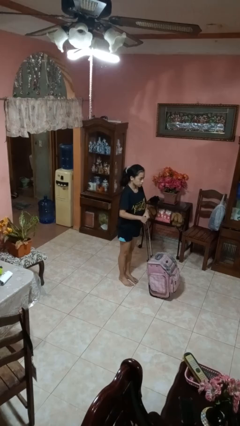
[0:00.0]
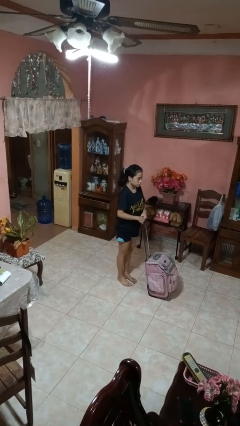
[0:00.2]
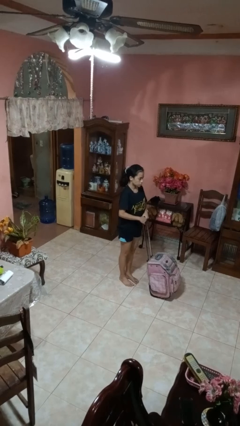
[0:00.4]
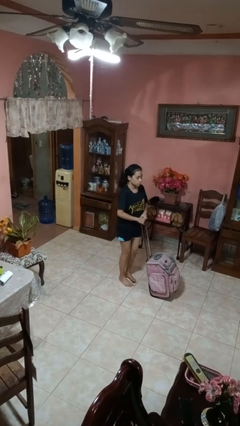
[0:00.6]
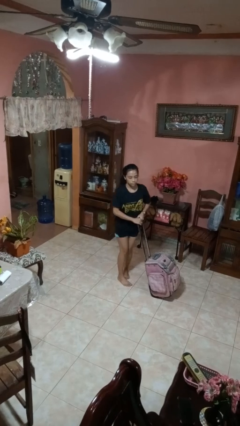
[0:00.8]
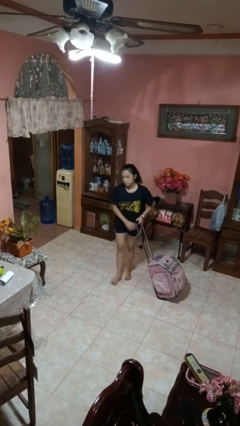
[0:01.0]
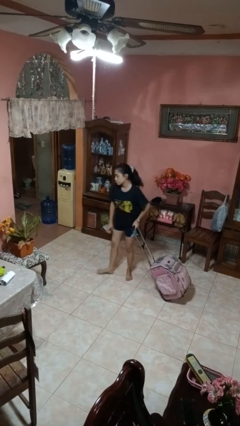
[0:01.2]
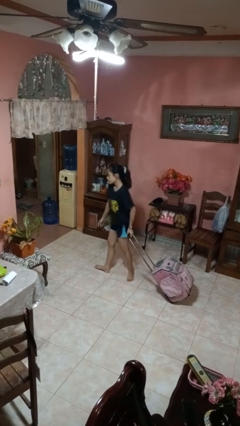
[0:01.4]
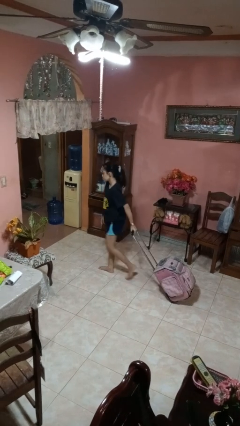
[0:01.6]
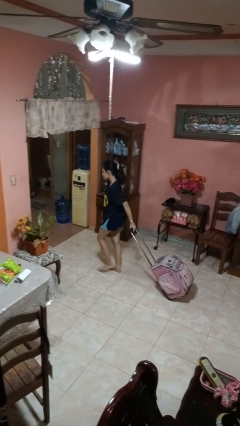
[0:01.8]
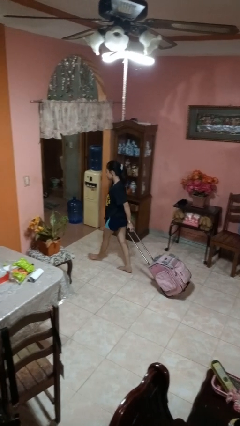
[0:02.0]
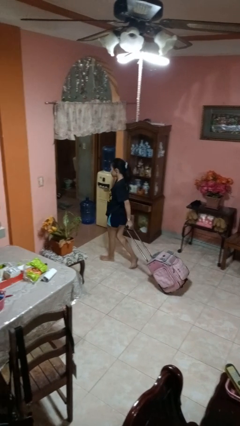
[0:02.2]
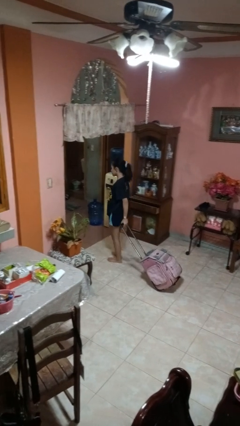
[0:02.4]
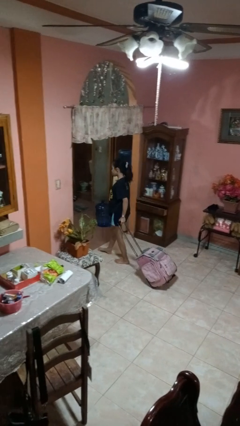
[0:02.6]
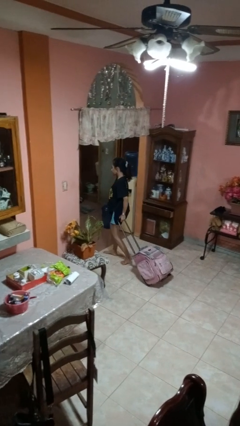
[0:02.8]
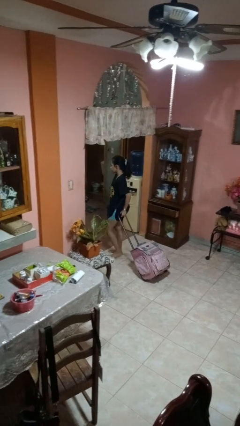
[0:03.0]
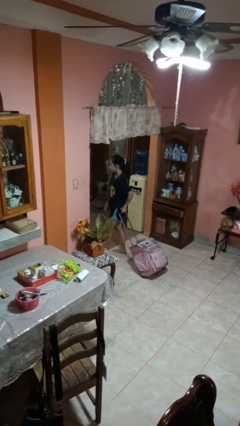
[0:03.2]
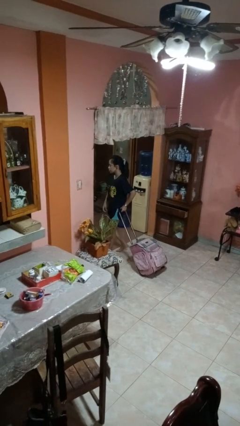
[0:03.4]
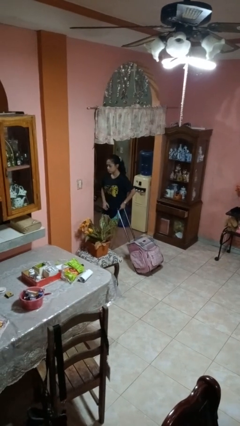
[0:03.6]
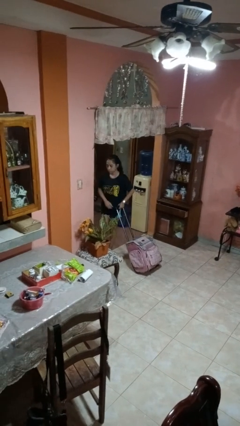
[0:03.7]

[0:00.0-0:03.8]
person pulls wheeled cart

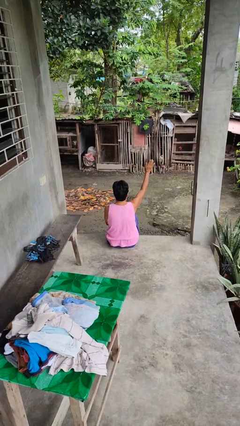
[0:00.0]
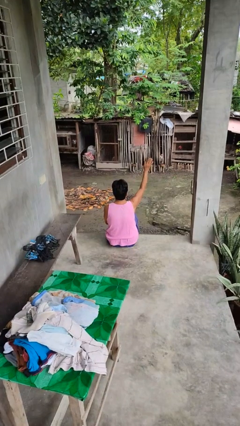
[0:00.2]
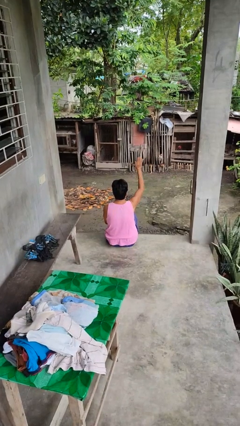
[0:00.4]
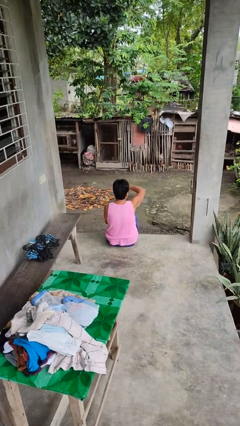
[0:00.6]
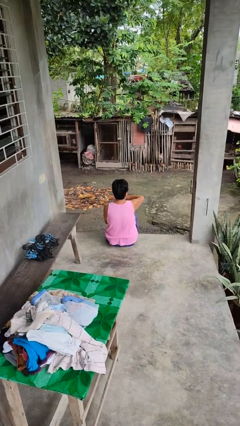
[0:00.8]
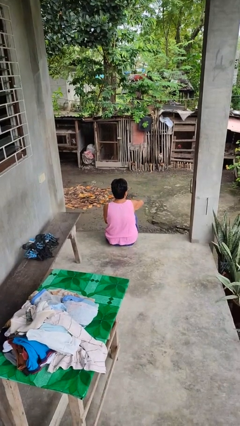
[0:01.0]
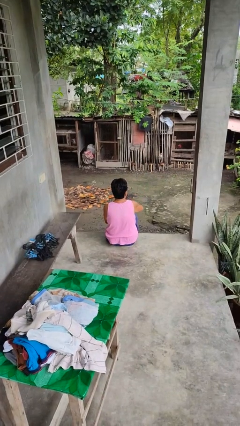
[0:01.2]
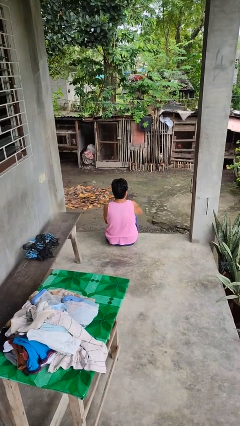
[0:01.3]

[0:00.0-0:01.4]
person gestures swipe down

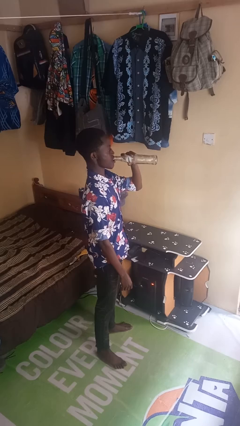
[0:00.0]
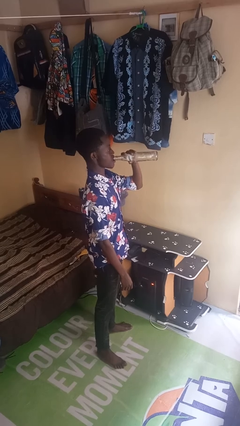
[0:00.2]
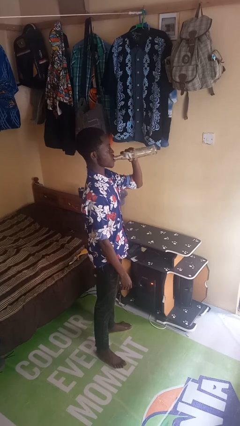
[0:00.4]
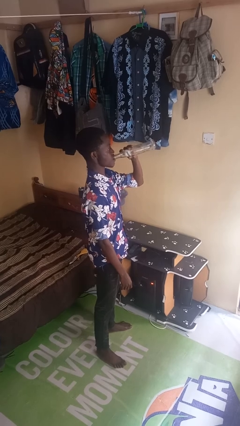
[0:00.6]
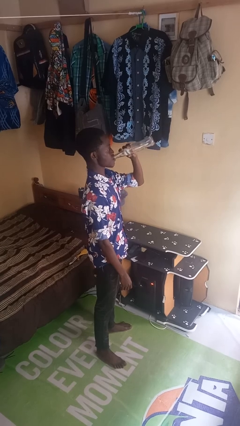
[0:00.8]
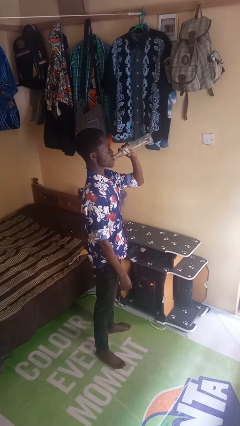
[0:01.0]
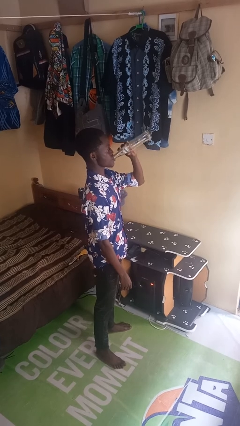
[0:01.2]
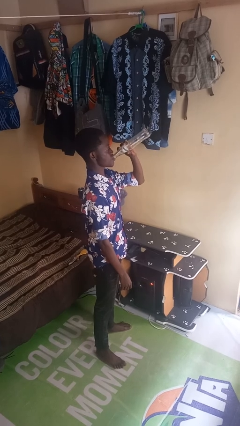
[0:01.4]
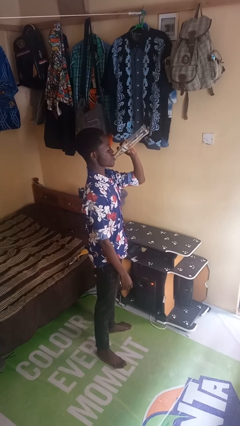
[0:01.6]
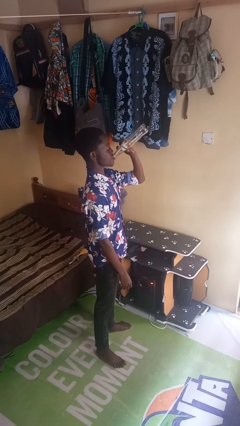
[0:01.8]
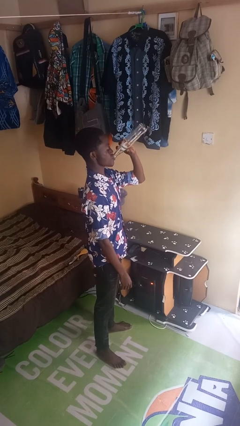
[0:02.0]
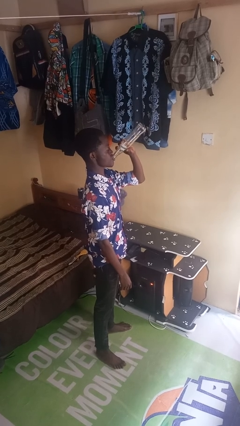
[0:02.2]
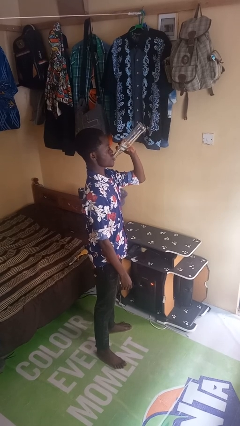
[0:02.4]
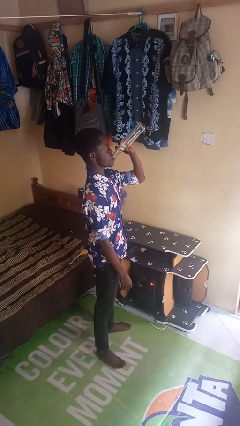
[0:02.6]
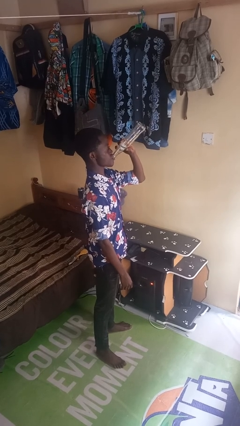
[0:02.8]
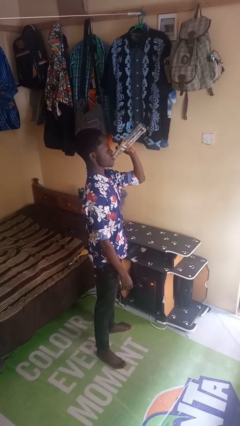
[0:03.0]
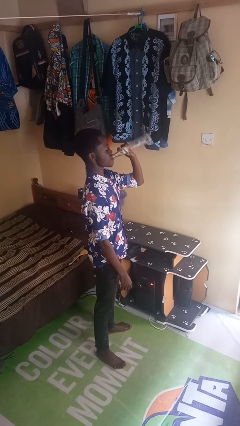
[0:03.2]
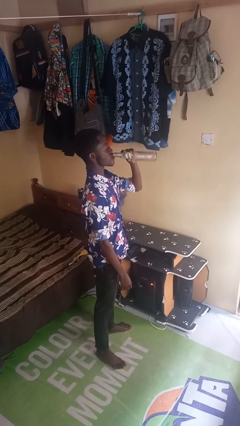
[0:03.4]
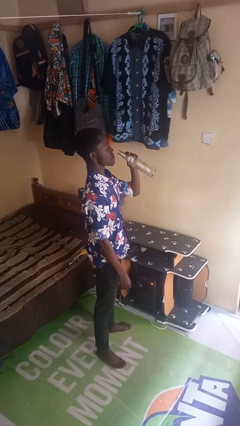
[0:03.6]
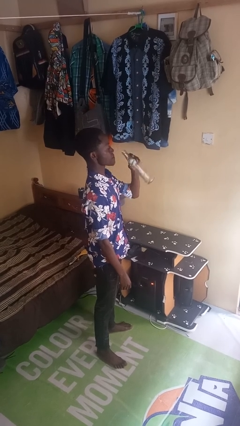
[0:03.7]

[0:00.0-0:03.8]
person drinks from bottle

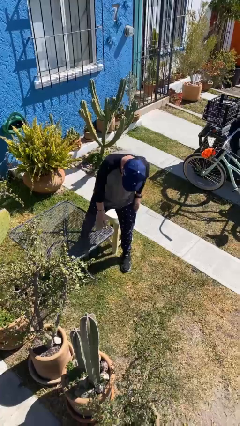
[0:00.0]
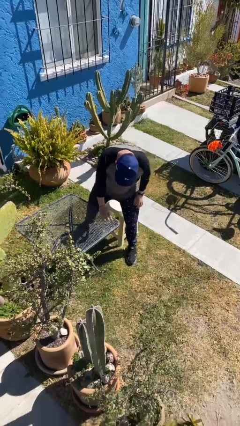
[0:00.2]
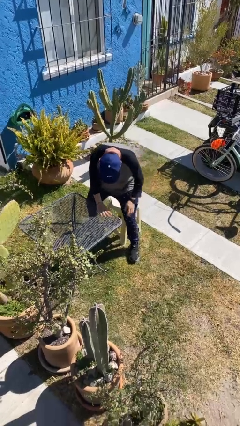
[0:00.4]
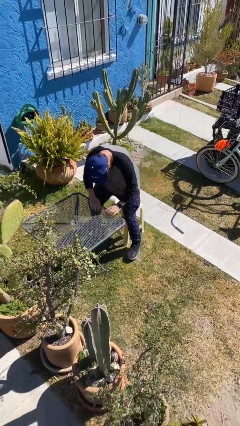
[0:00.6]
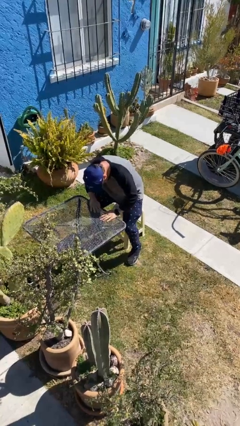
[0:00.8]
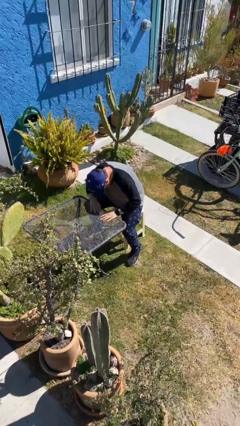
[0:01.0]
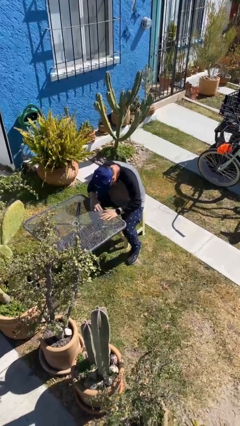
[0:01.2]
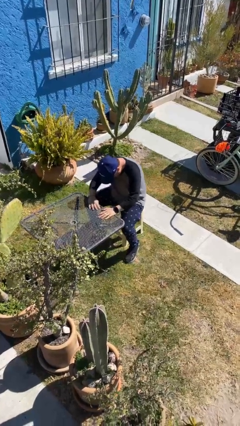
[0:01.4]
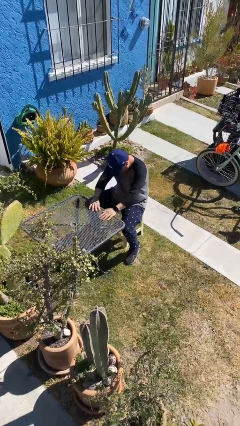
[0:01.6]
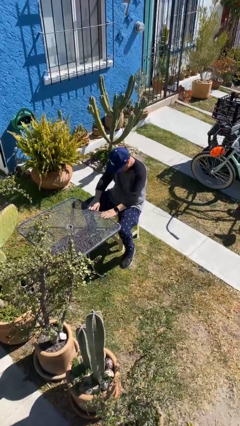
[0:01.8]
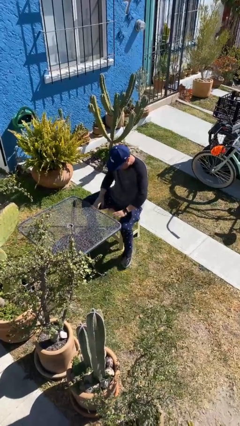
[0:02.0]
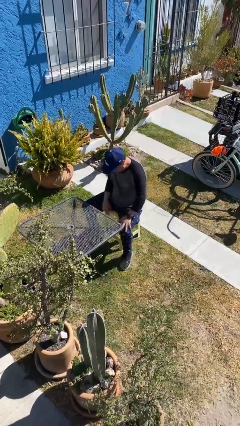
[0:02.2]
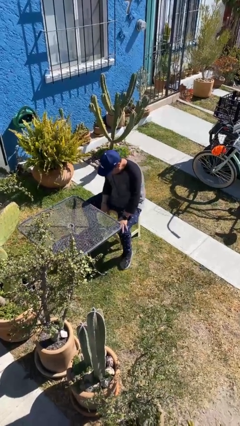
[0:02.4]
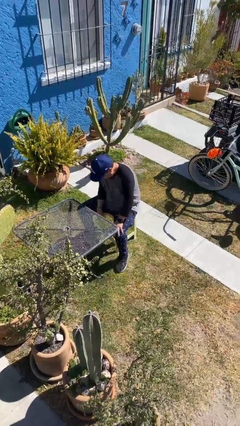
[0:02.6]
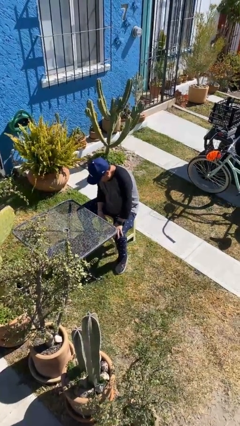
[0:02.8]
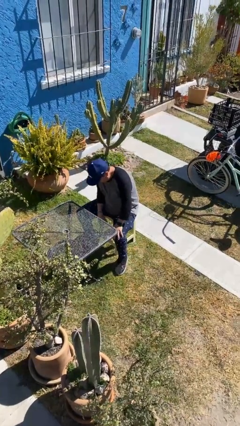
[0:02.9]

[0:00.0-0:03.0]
person sits down

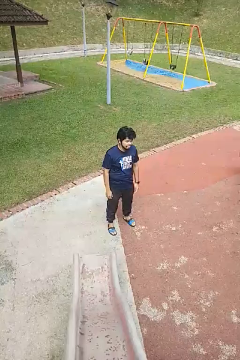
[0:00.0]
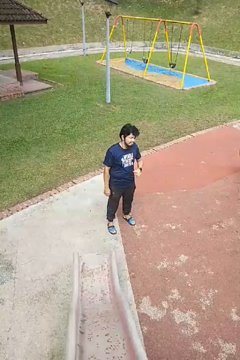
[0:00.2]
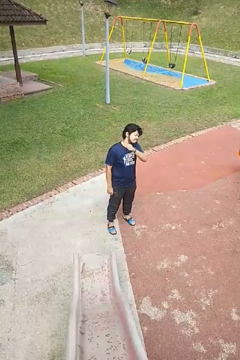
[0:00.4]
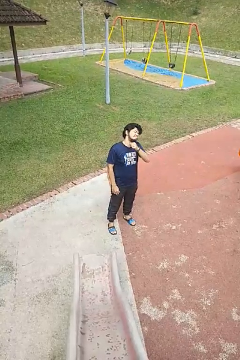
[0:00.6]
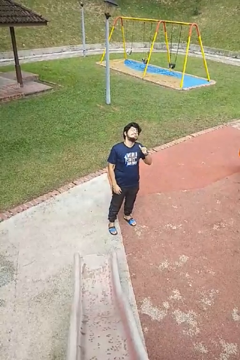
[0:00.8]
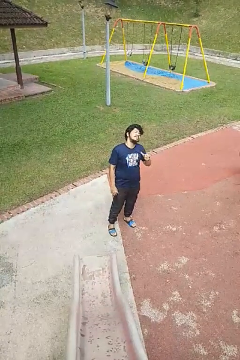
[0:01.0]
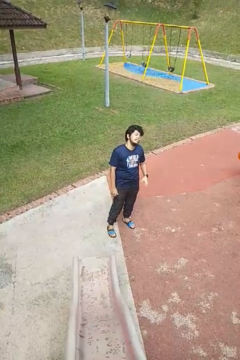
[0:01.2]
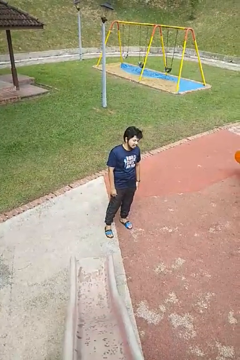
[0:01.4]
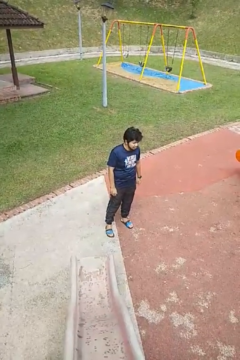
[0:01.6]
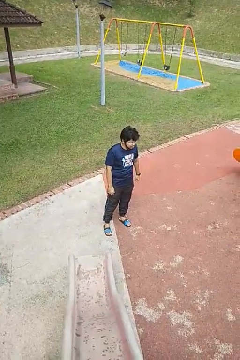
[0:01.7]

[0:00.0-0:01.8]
person gestures cut

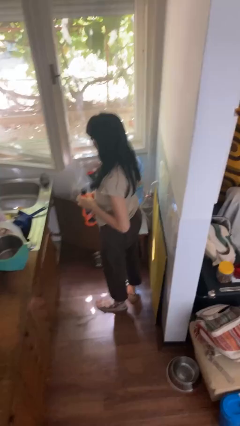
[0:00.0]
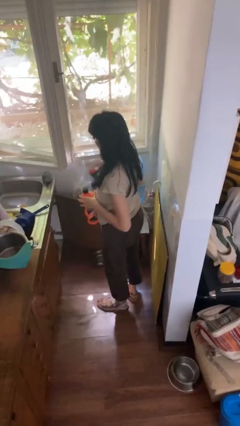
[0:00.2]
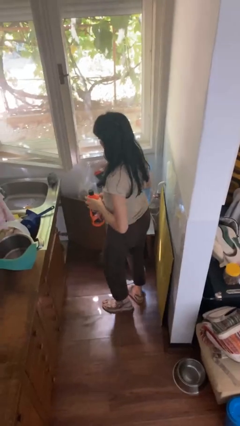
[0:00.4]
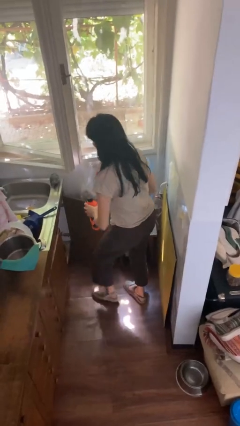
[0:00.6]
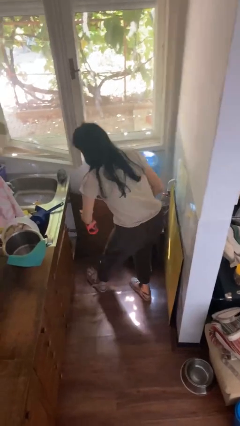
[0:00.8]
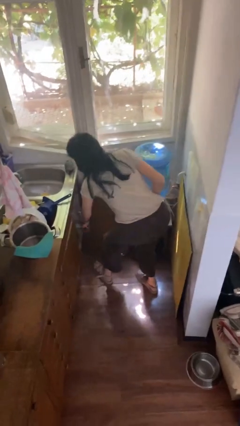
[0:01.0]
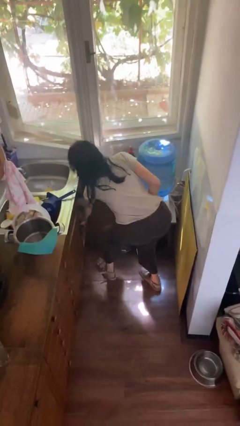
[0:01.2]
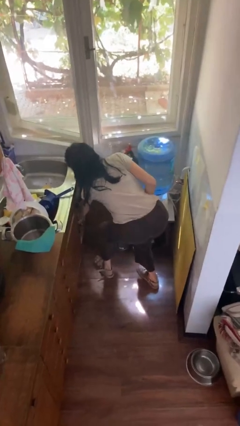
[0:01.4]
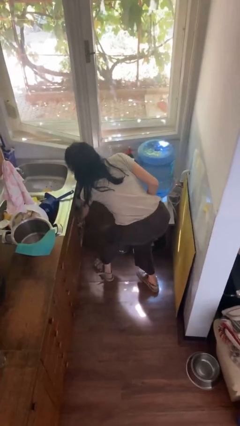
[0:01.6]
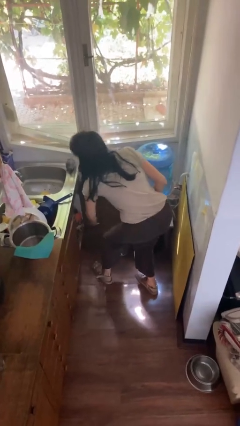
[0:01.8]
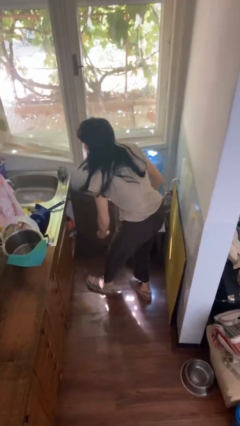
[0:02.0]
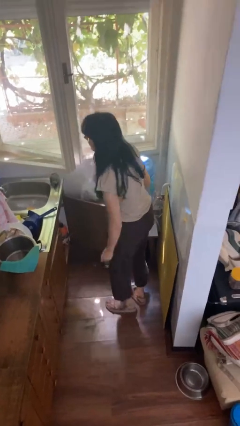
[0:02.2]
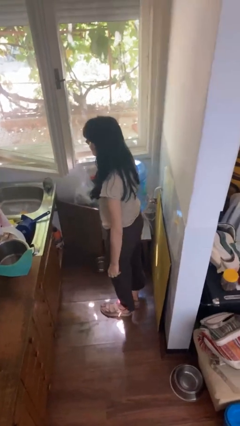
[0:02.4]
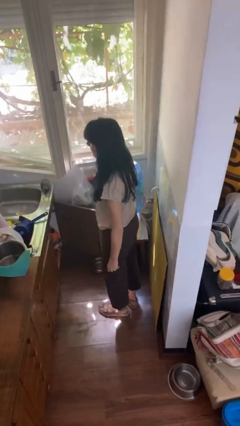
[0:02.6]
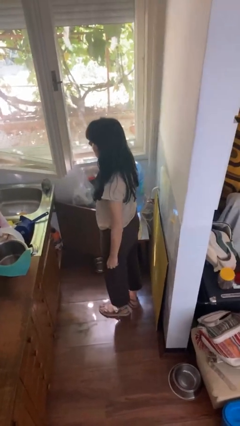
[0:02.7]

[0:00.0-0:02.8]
person puts down object into cabinet

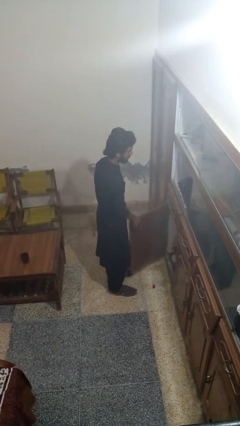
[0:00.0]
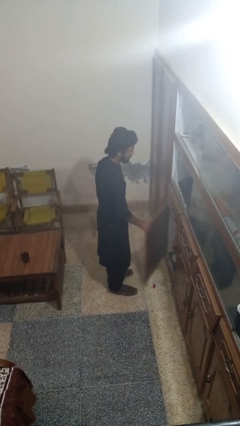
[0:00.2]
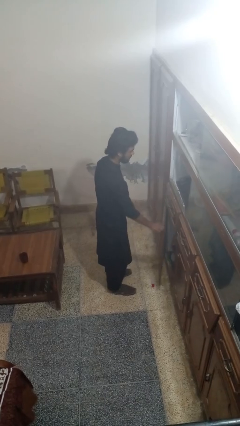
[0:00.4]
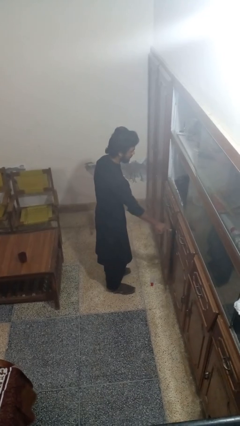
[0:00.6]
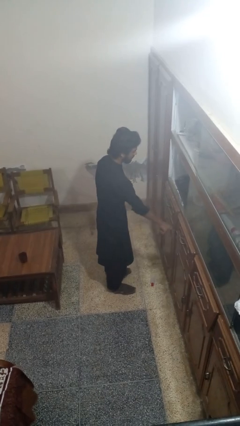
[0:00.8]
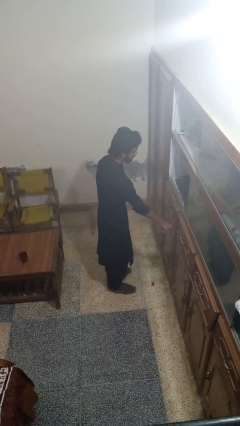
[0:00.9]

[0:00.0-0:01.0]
person closes cabinet
